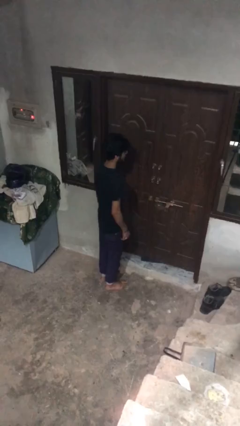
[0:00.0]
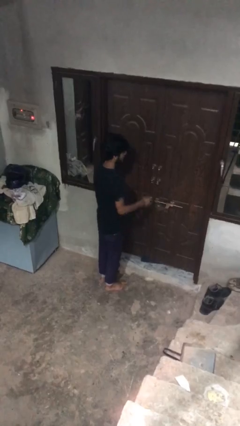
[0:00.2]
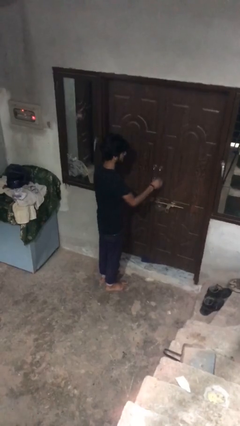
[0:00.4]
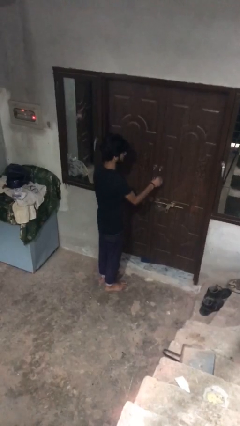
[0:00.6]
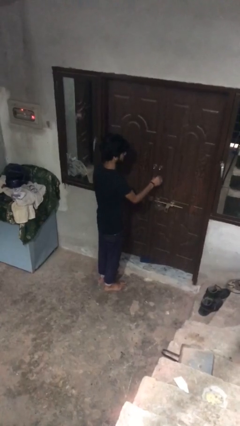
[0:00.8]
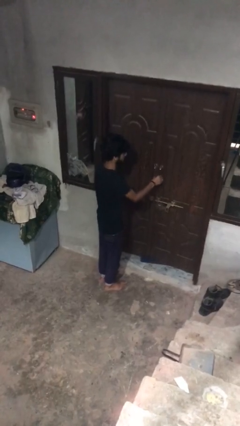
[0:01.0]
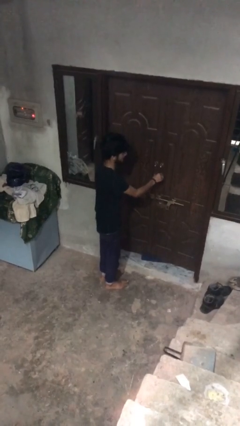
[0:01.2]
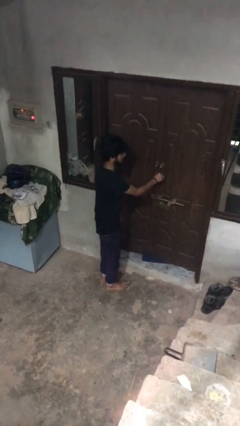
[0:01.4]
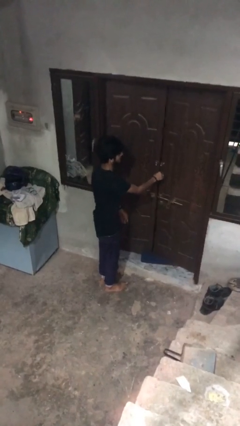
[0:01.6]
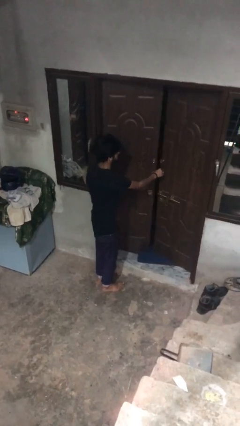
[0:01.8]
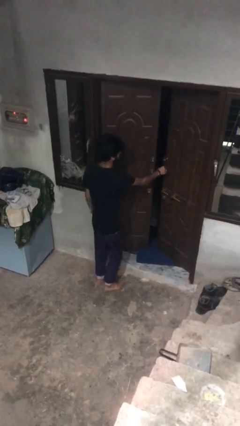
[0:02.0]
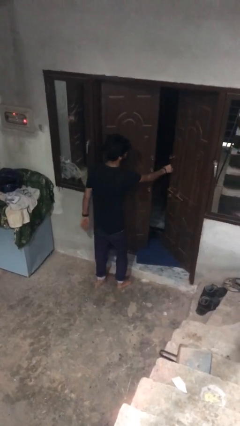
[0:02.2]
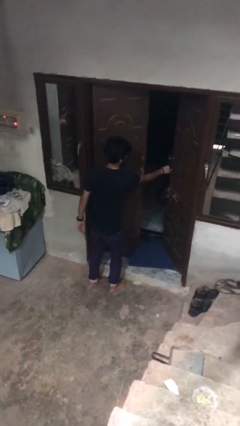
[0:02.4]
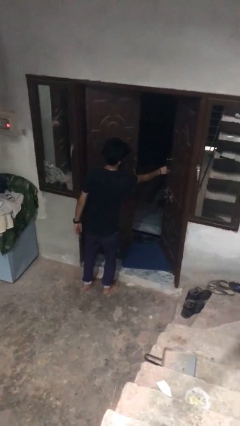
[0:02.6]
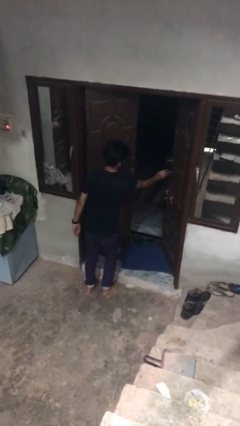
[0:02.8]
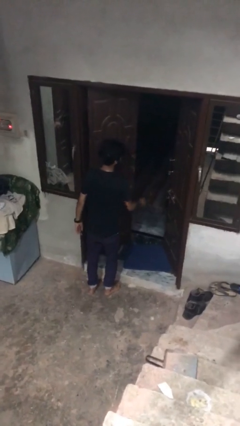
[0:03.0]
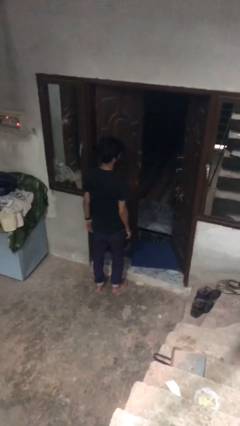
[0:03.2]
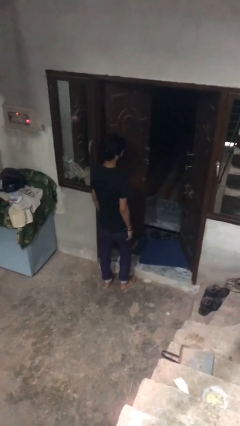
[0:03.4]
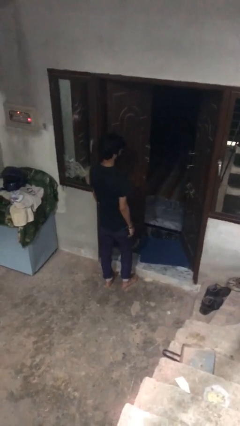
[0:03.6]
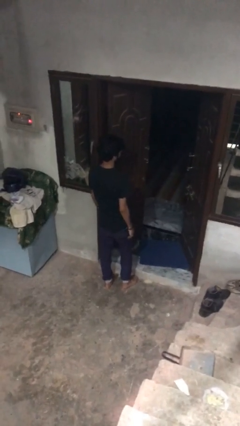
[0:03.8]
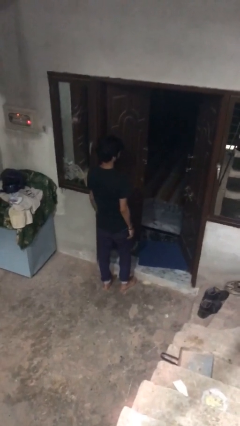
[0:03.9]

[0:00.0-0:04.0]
person opens facility door

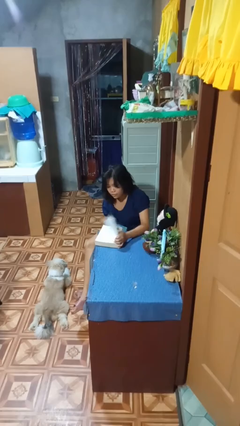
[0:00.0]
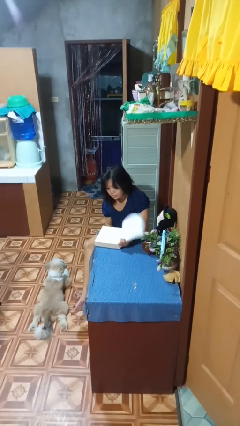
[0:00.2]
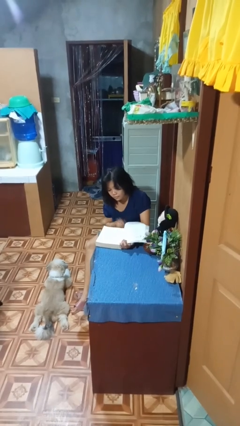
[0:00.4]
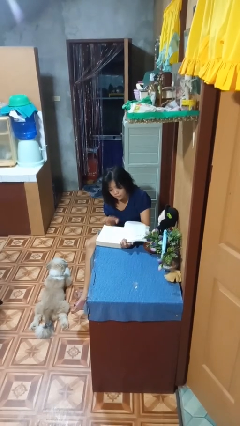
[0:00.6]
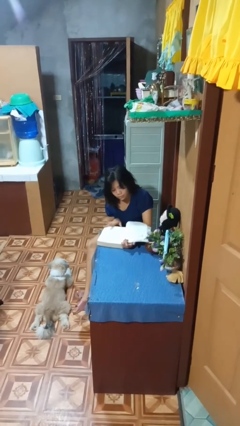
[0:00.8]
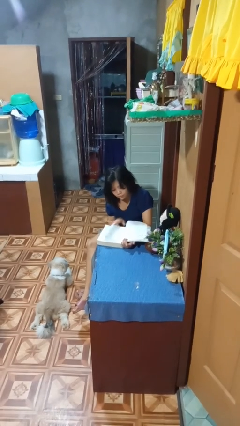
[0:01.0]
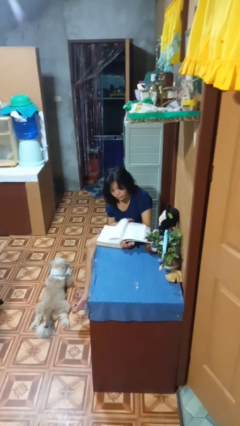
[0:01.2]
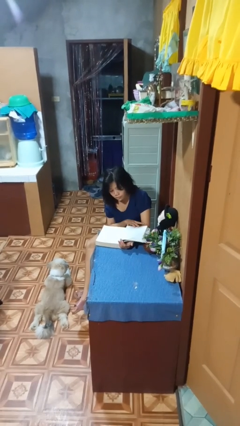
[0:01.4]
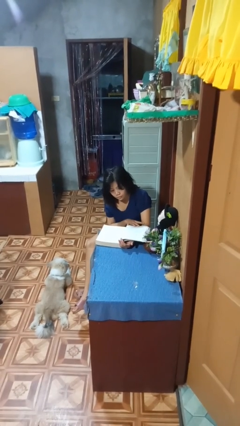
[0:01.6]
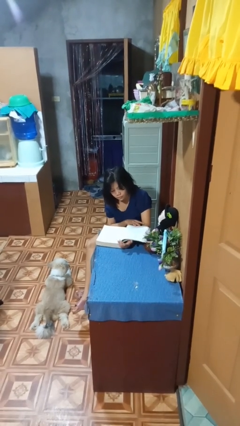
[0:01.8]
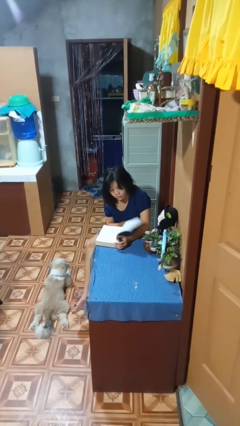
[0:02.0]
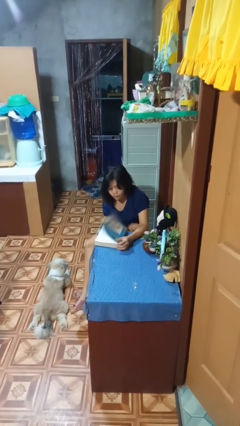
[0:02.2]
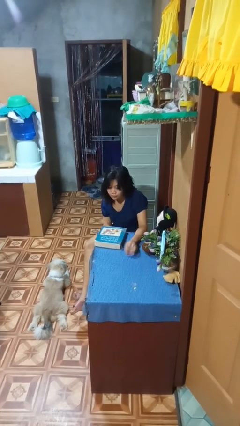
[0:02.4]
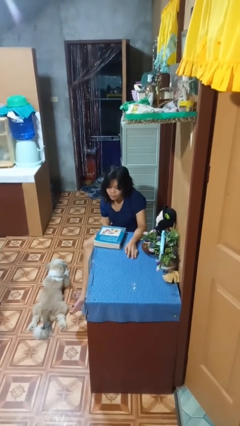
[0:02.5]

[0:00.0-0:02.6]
person reads book

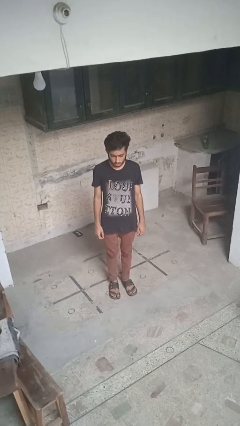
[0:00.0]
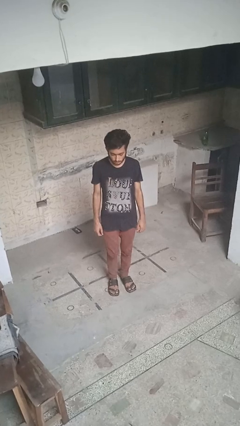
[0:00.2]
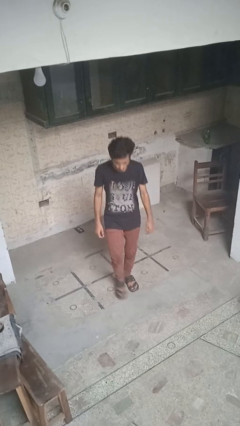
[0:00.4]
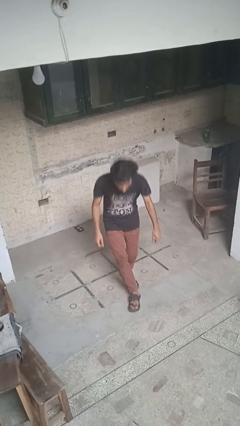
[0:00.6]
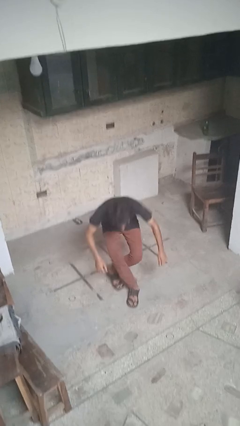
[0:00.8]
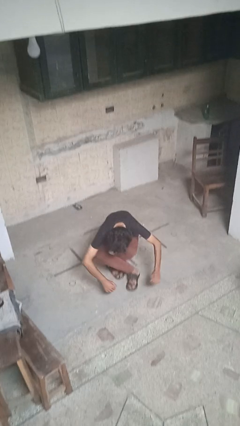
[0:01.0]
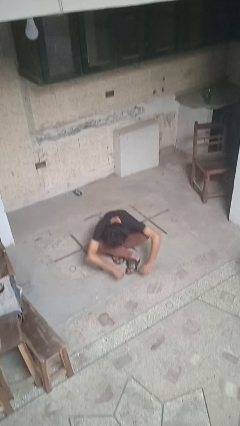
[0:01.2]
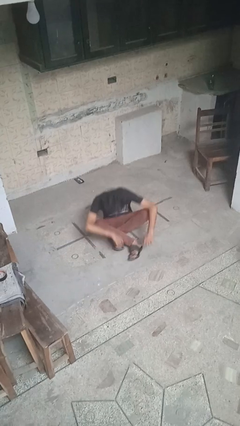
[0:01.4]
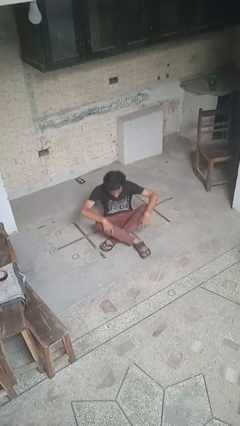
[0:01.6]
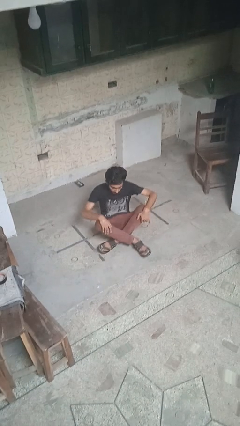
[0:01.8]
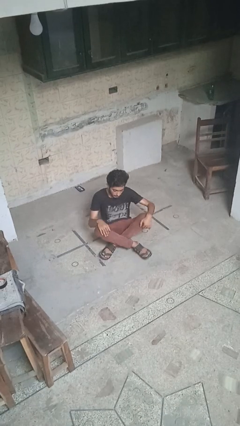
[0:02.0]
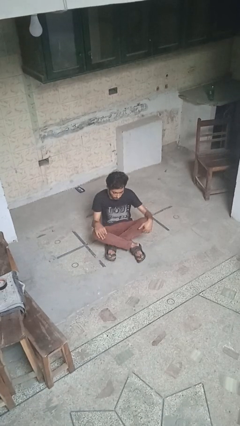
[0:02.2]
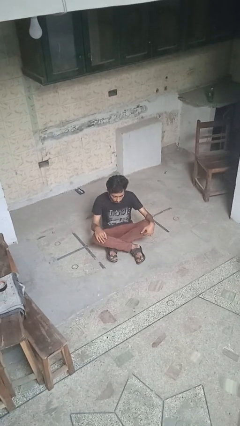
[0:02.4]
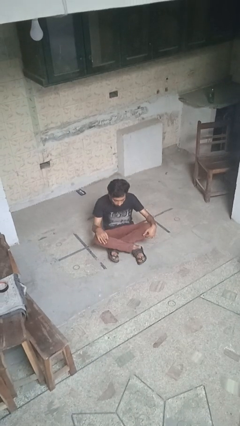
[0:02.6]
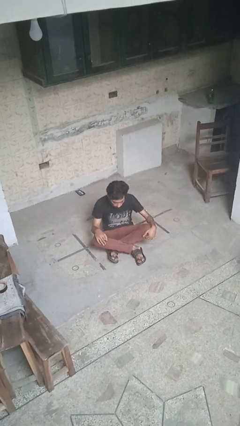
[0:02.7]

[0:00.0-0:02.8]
person sits crisscross

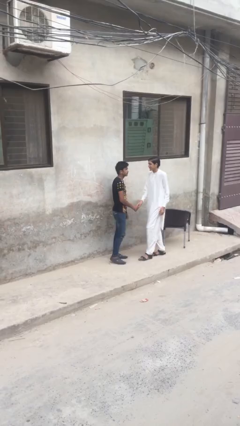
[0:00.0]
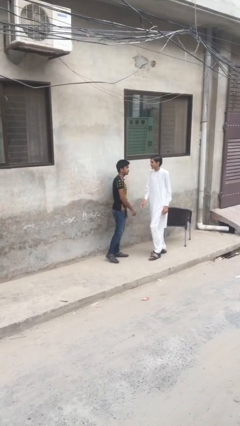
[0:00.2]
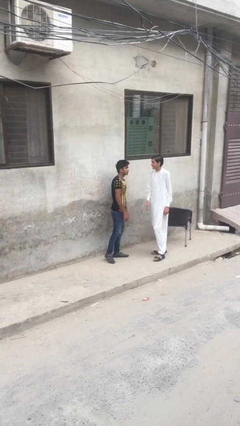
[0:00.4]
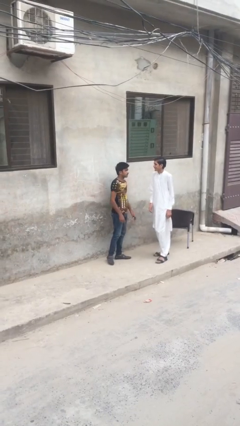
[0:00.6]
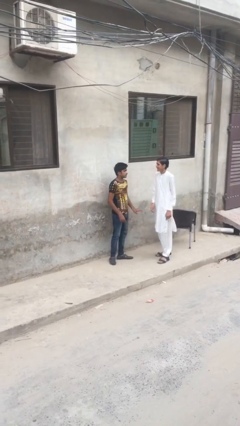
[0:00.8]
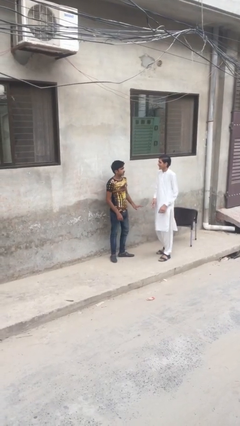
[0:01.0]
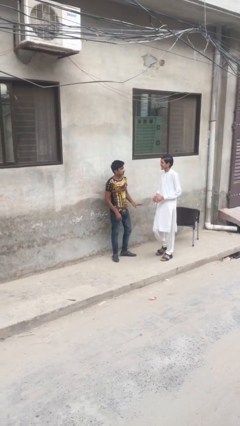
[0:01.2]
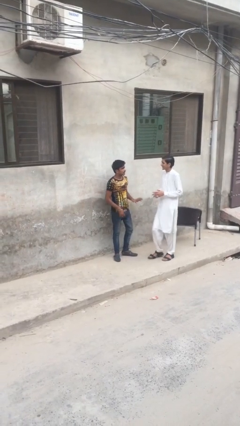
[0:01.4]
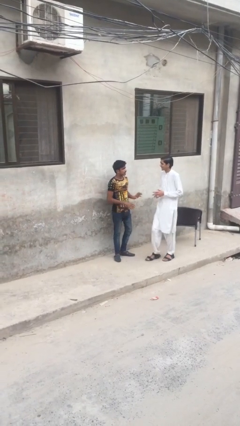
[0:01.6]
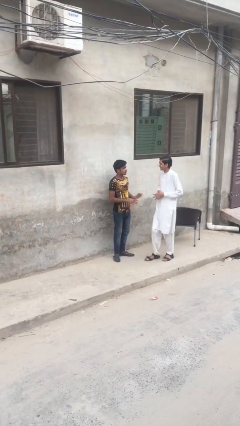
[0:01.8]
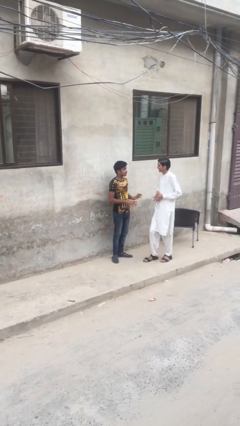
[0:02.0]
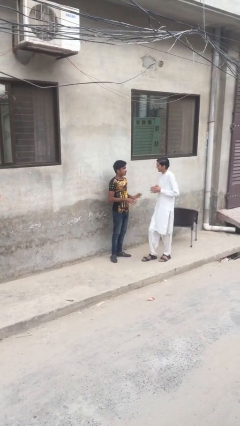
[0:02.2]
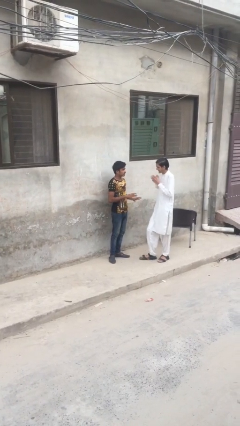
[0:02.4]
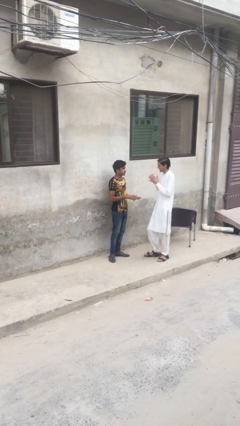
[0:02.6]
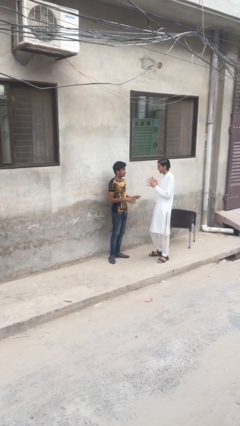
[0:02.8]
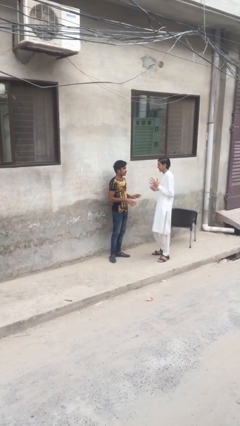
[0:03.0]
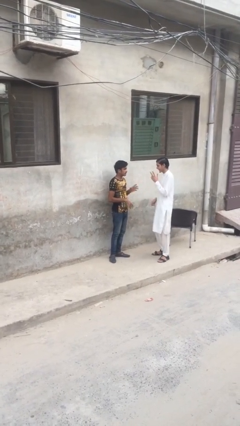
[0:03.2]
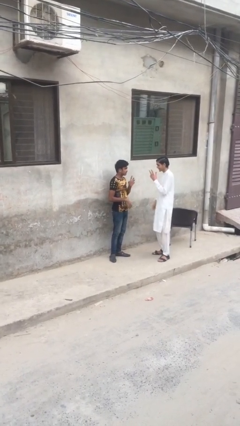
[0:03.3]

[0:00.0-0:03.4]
person talks to person

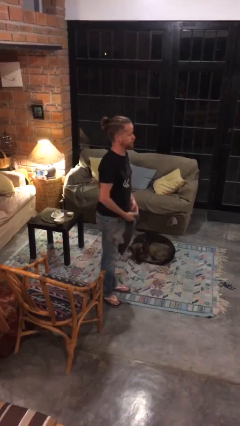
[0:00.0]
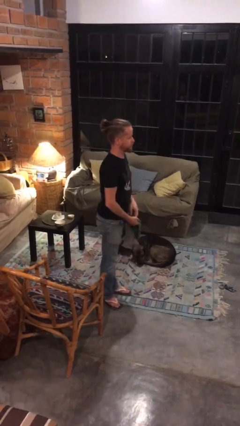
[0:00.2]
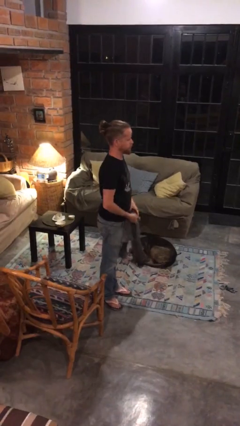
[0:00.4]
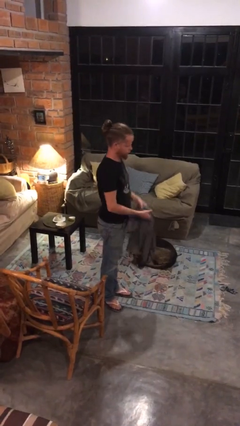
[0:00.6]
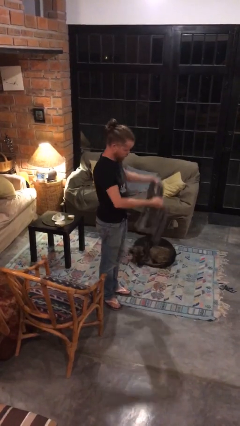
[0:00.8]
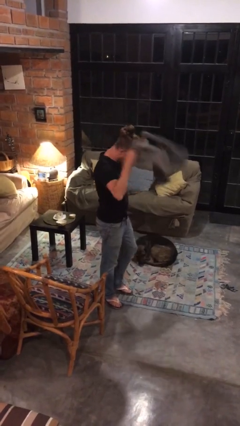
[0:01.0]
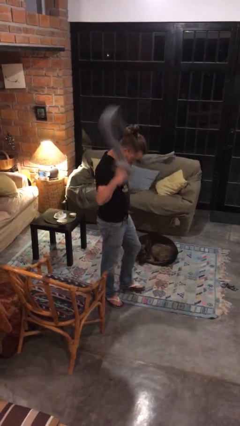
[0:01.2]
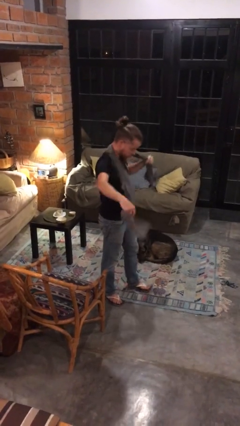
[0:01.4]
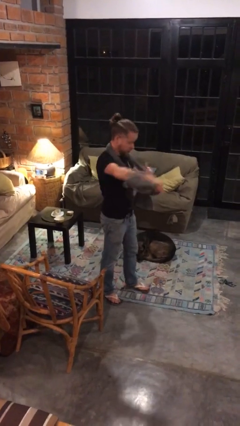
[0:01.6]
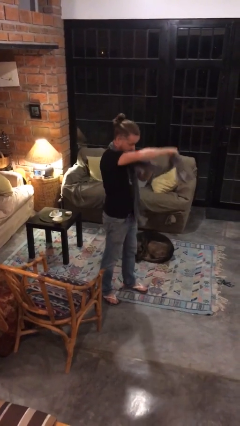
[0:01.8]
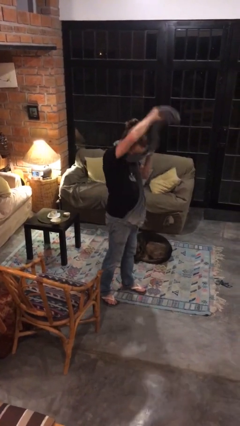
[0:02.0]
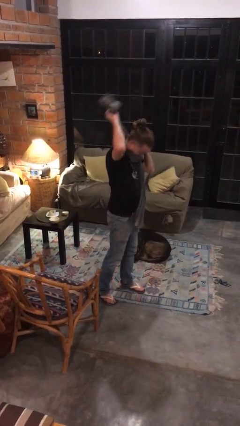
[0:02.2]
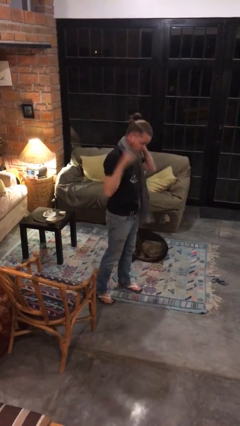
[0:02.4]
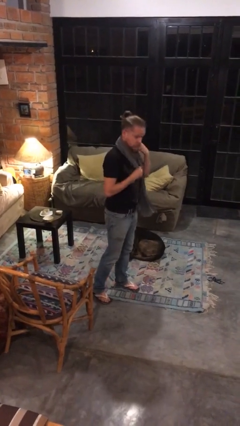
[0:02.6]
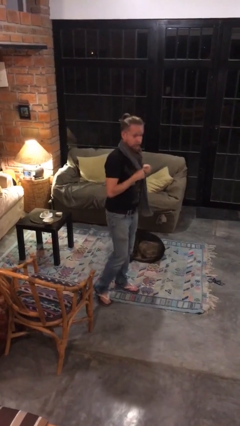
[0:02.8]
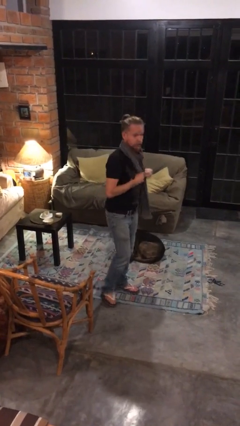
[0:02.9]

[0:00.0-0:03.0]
person puts on scarf

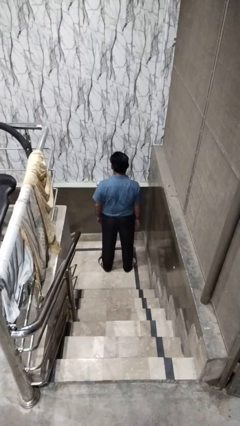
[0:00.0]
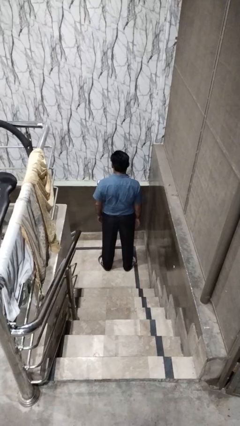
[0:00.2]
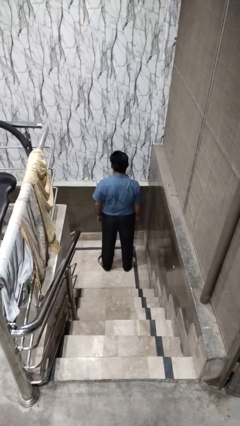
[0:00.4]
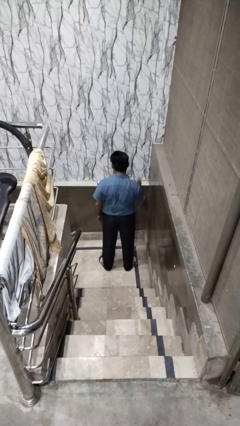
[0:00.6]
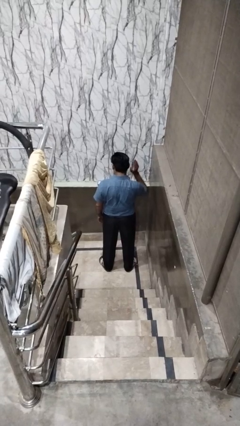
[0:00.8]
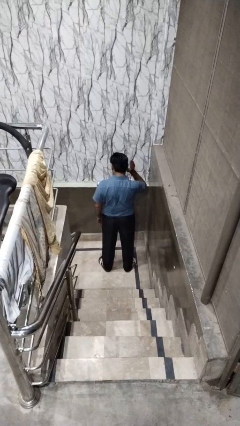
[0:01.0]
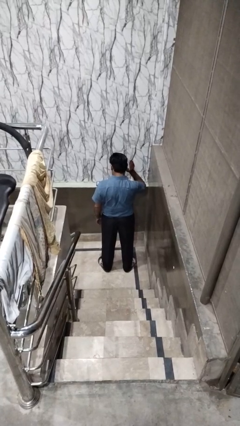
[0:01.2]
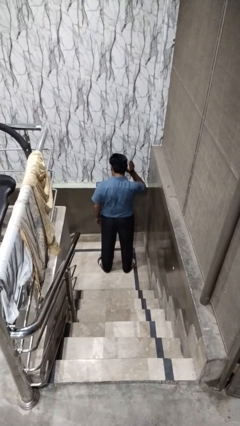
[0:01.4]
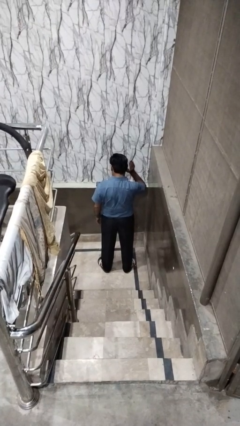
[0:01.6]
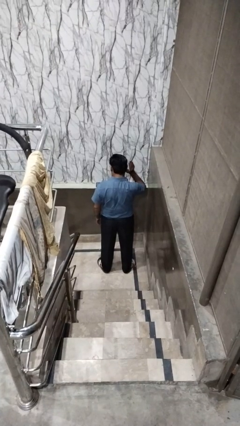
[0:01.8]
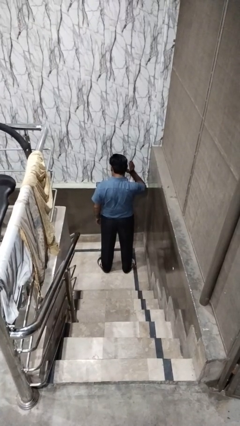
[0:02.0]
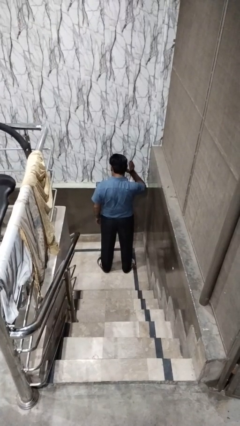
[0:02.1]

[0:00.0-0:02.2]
person gestures listen closely
